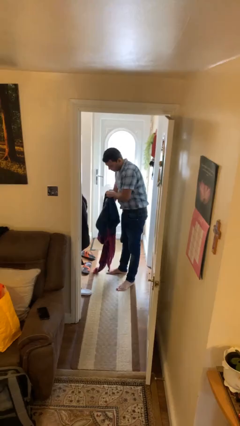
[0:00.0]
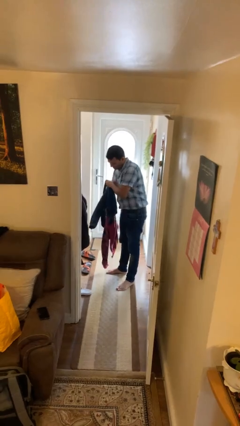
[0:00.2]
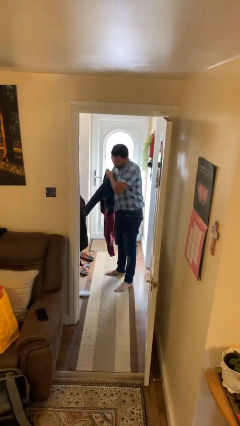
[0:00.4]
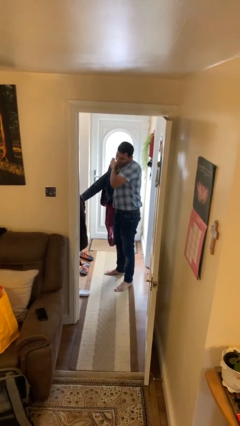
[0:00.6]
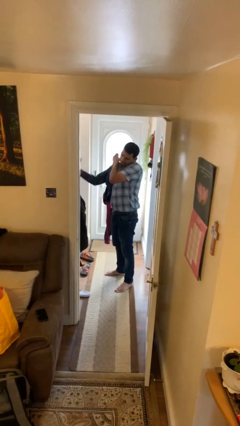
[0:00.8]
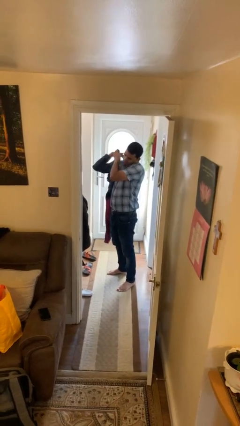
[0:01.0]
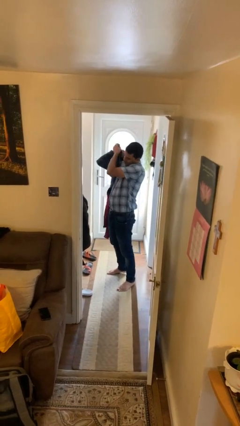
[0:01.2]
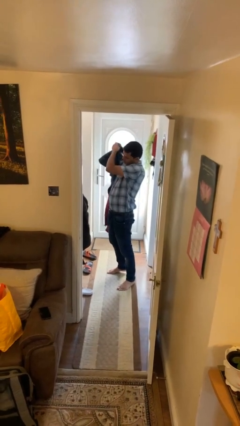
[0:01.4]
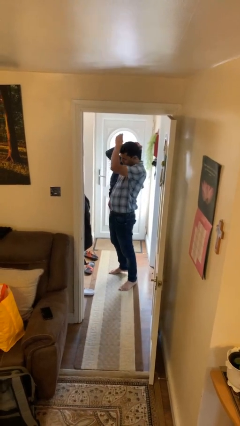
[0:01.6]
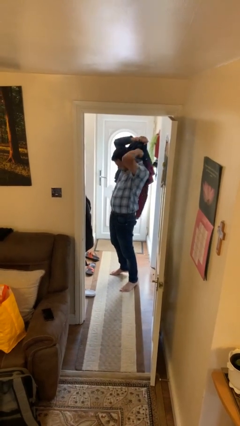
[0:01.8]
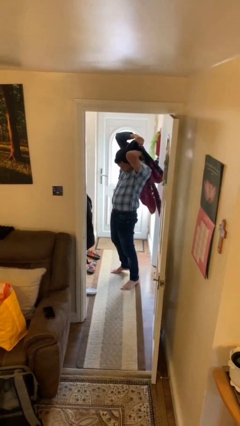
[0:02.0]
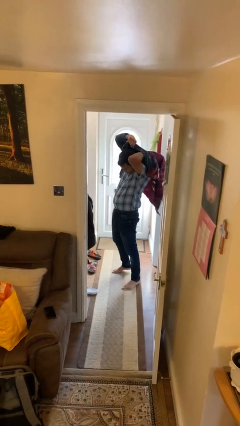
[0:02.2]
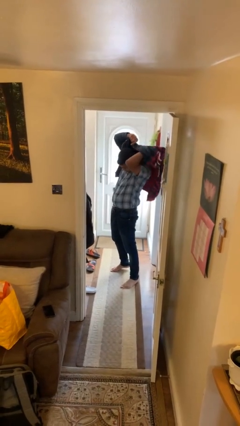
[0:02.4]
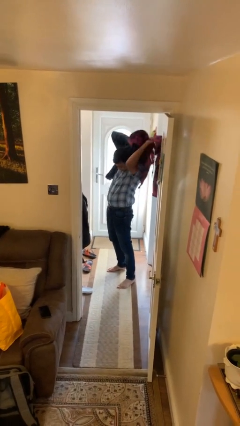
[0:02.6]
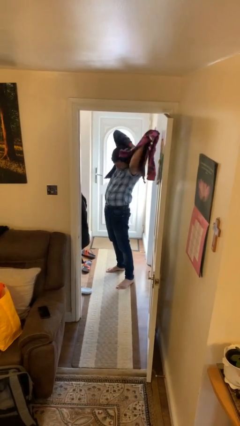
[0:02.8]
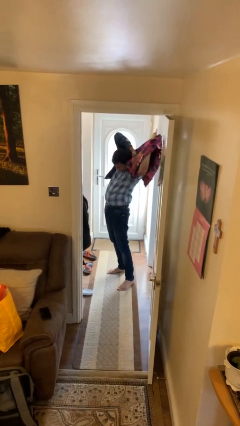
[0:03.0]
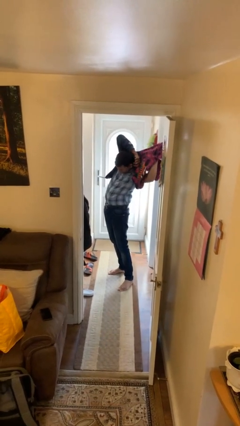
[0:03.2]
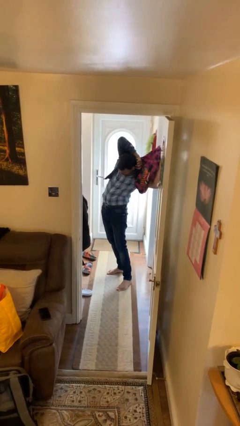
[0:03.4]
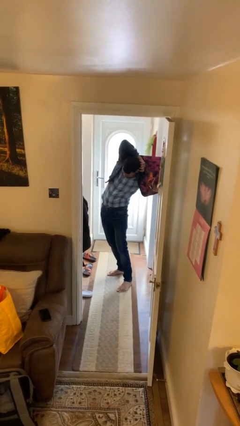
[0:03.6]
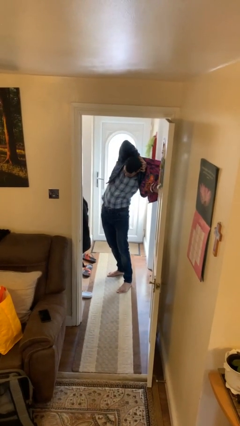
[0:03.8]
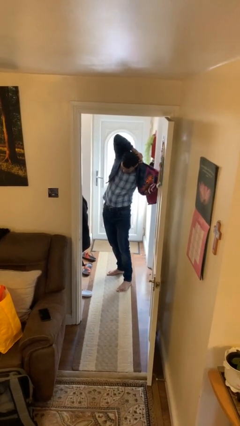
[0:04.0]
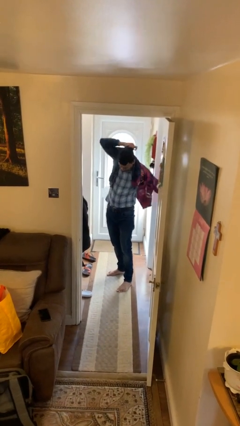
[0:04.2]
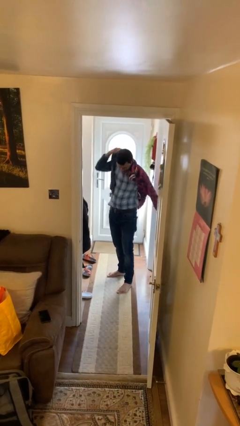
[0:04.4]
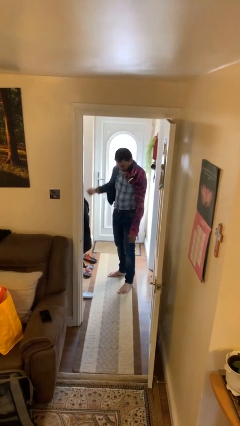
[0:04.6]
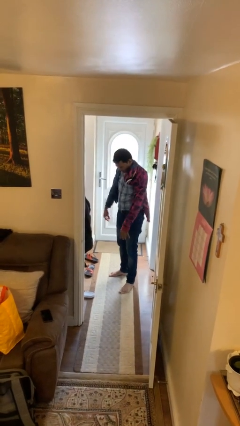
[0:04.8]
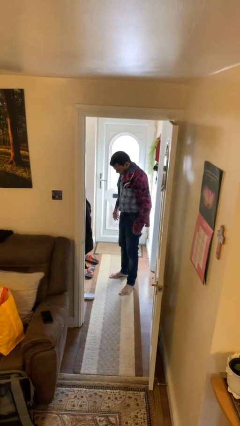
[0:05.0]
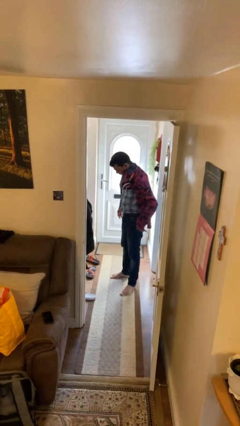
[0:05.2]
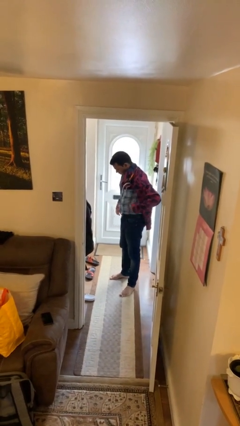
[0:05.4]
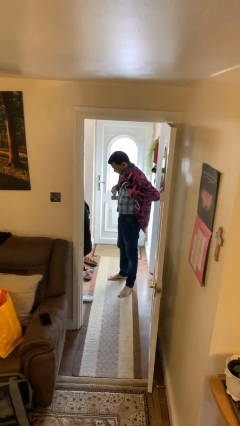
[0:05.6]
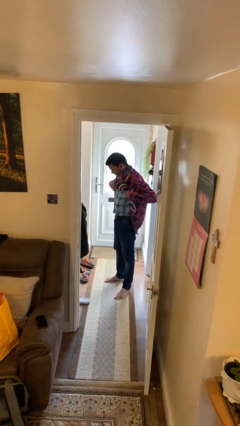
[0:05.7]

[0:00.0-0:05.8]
person puts on hoodie

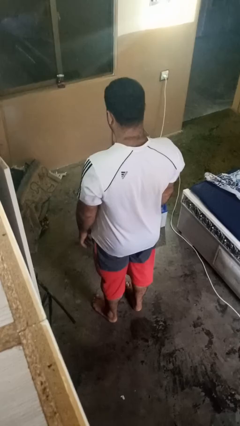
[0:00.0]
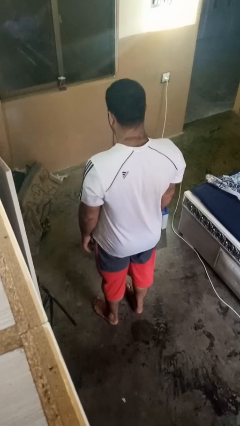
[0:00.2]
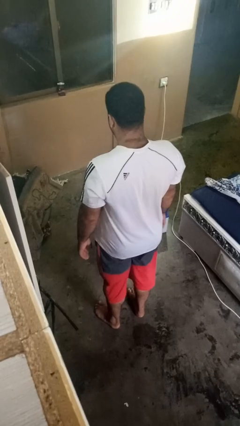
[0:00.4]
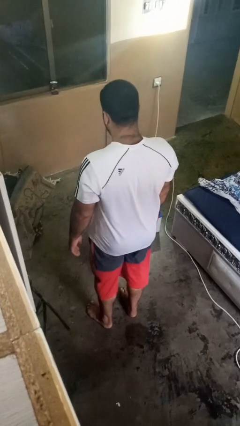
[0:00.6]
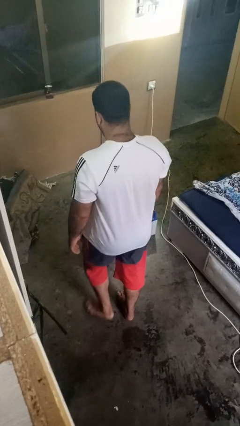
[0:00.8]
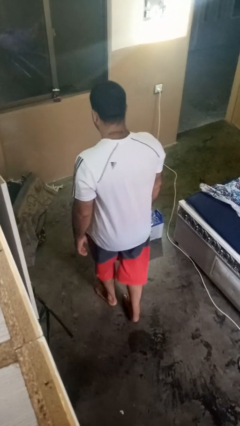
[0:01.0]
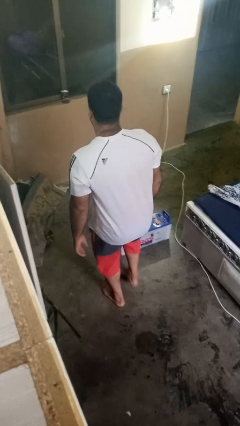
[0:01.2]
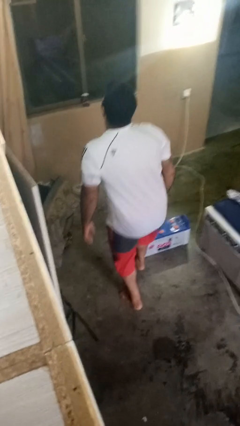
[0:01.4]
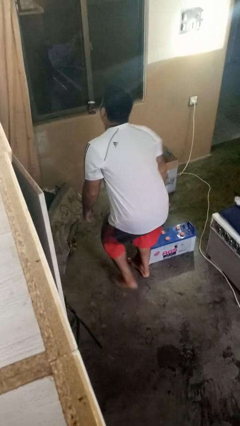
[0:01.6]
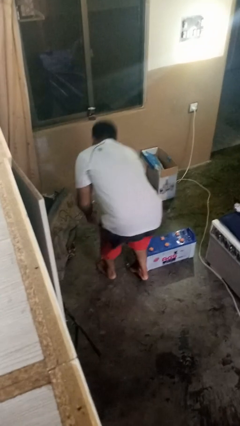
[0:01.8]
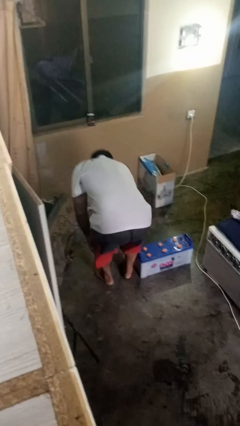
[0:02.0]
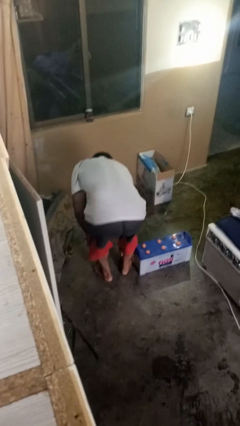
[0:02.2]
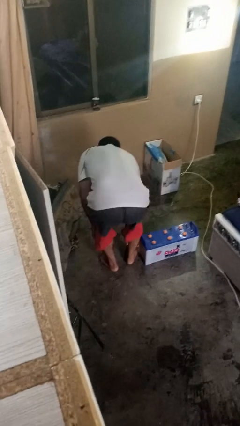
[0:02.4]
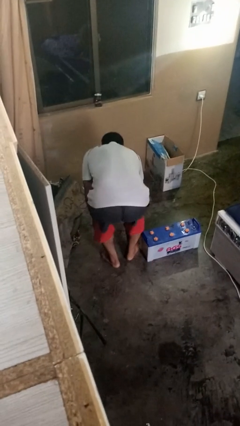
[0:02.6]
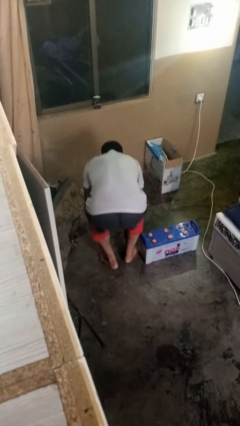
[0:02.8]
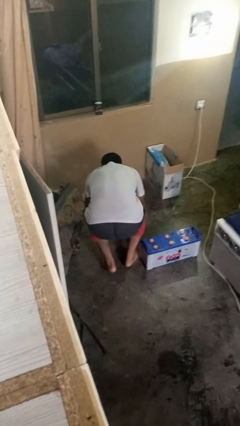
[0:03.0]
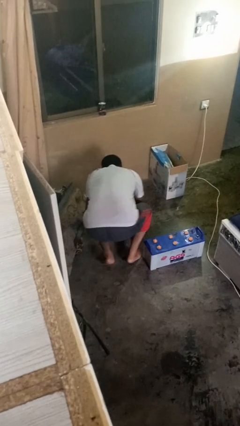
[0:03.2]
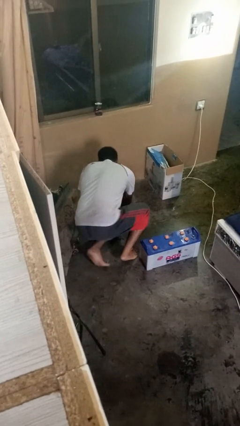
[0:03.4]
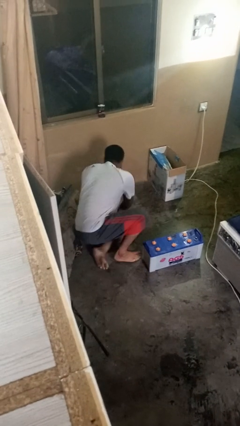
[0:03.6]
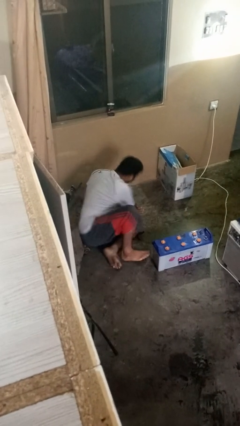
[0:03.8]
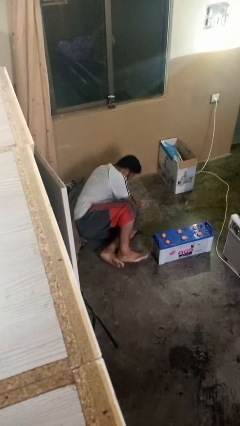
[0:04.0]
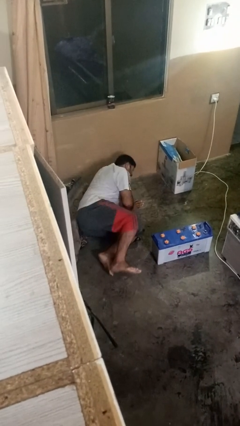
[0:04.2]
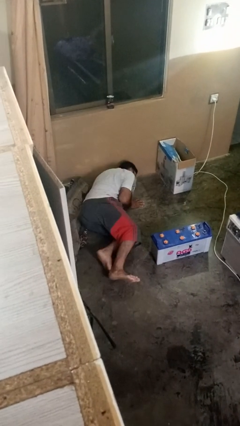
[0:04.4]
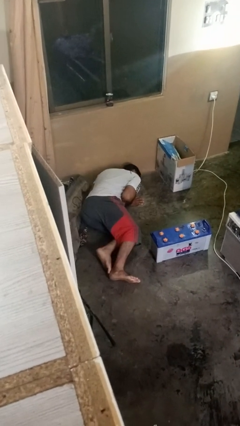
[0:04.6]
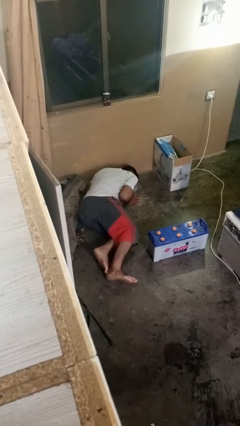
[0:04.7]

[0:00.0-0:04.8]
person trips on object on floor

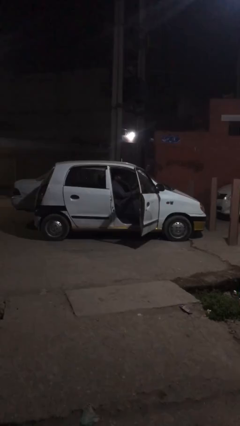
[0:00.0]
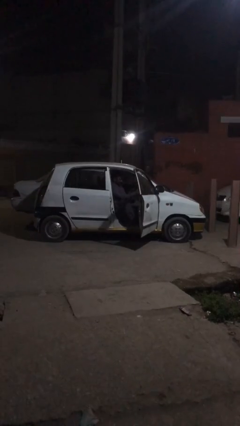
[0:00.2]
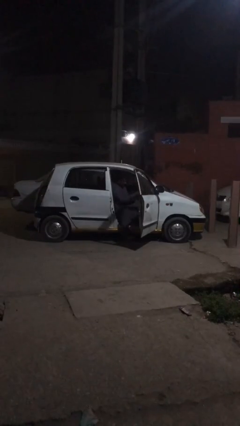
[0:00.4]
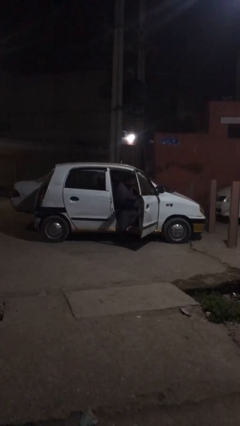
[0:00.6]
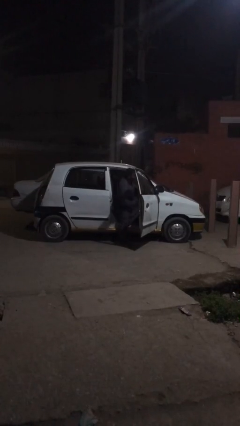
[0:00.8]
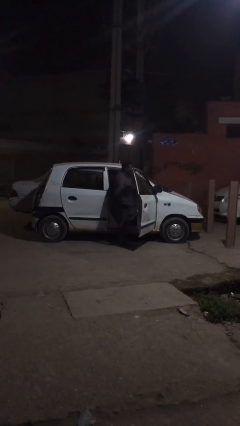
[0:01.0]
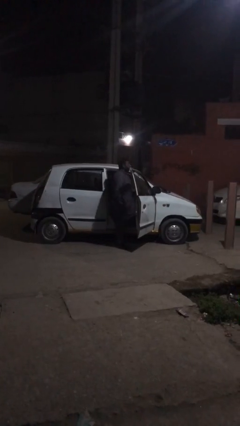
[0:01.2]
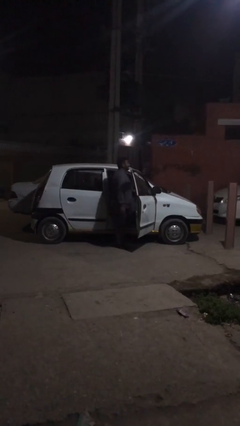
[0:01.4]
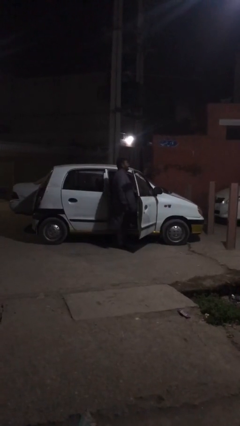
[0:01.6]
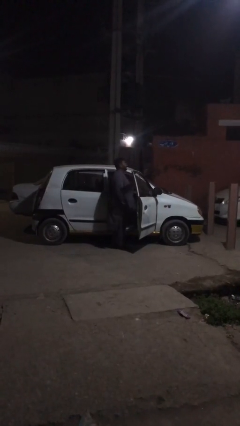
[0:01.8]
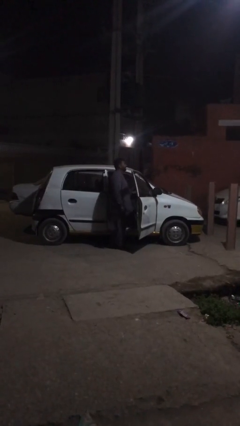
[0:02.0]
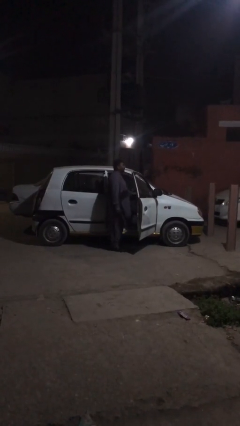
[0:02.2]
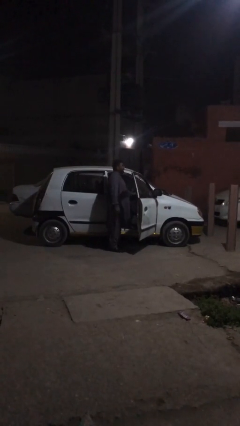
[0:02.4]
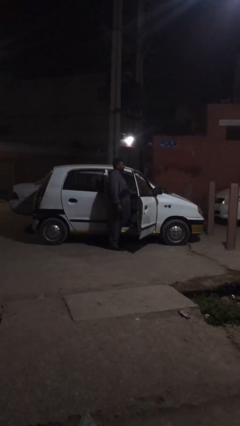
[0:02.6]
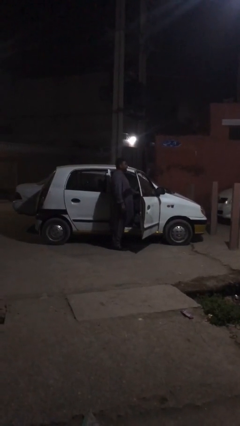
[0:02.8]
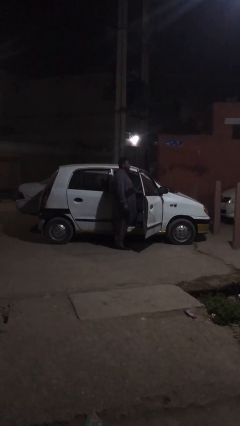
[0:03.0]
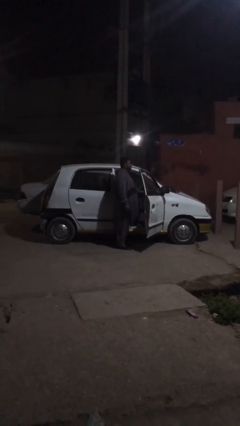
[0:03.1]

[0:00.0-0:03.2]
person exits car

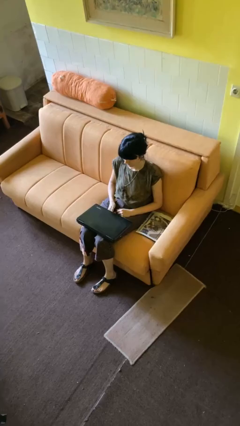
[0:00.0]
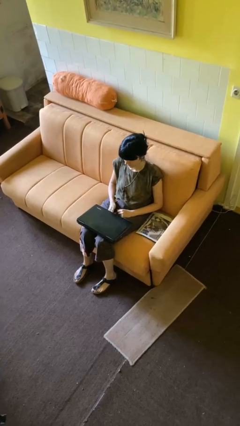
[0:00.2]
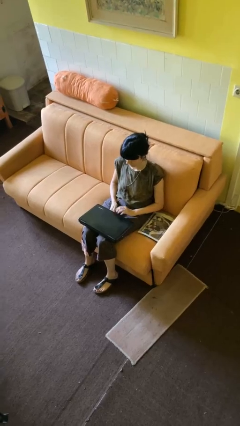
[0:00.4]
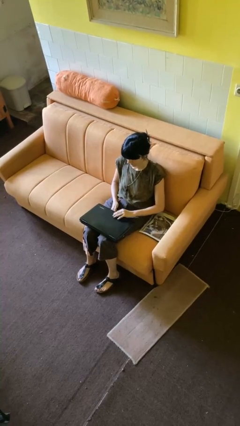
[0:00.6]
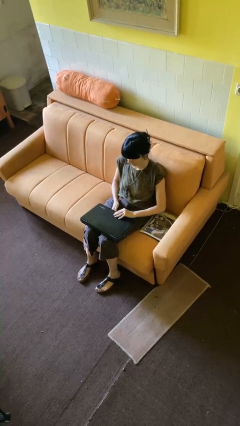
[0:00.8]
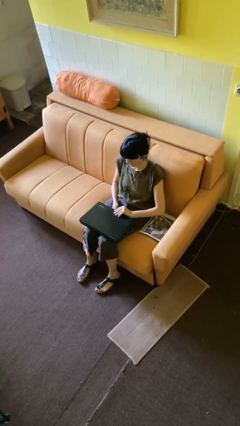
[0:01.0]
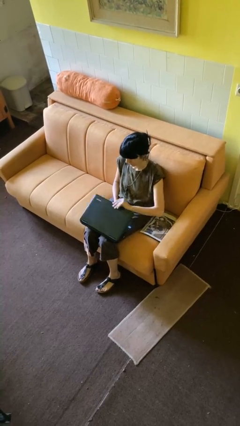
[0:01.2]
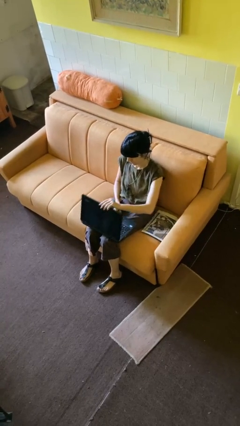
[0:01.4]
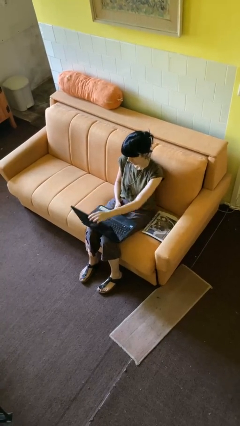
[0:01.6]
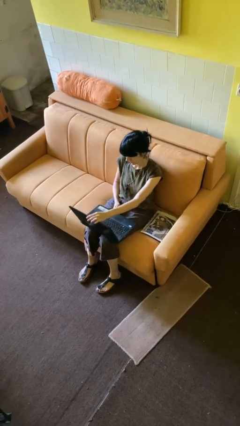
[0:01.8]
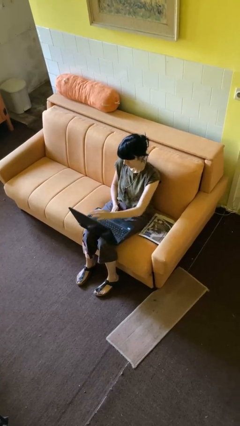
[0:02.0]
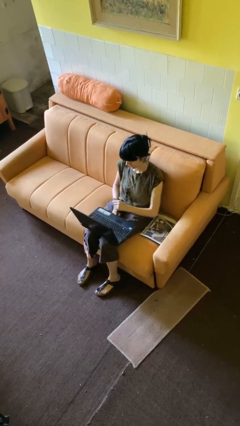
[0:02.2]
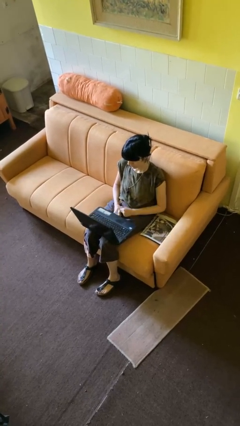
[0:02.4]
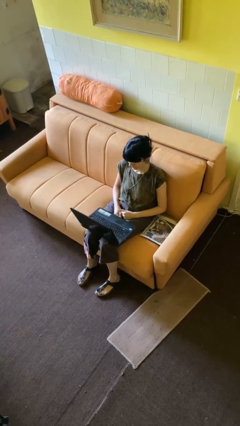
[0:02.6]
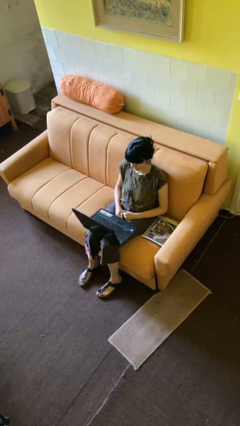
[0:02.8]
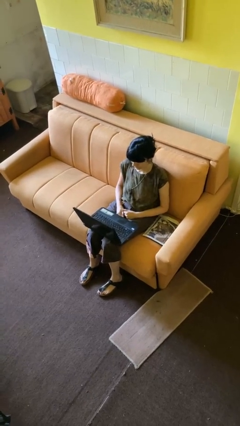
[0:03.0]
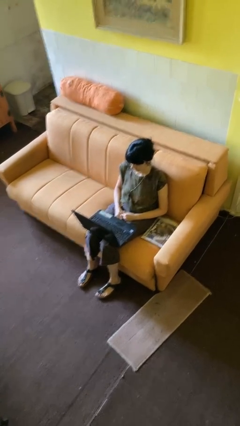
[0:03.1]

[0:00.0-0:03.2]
person opens laptop

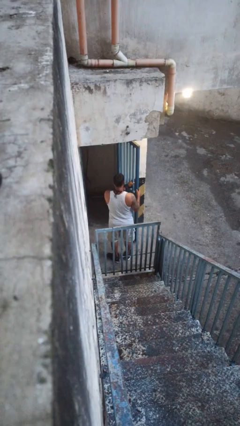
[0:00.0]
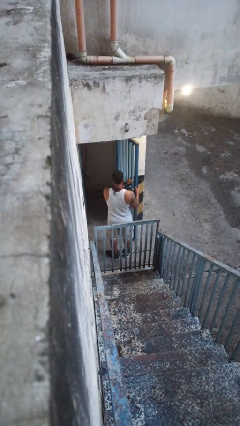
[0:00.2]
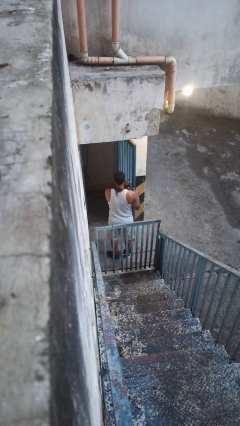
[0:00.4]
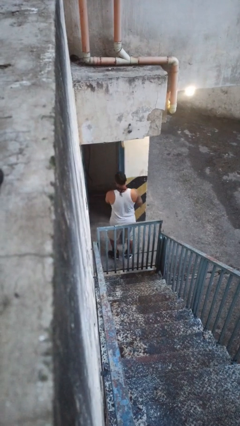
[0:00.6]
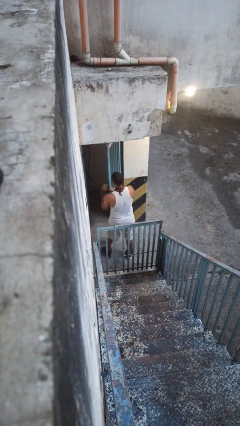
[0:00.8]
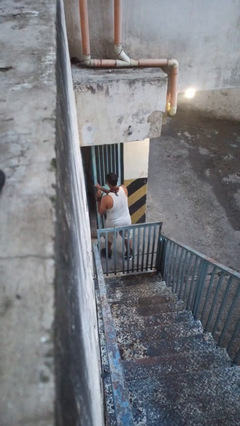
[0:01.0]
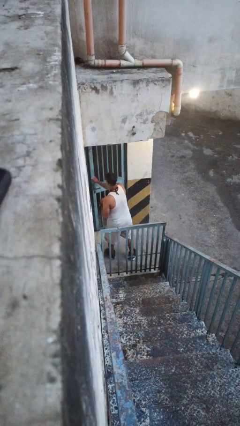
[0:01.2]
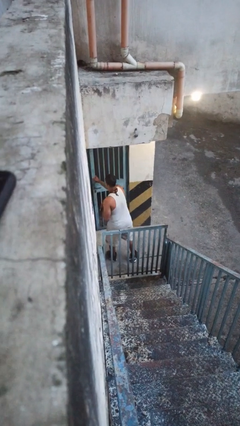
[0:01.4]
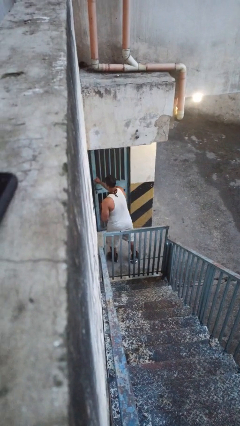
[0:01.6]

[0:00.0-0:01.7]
person closes facility door
